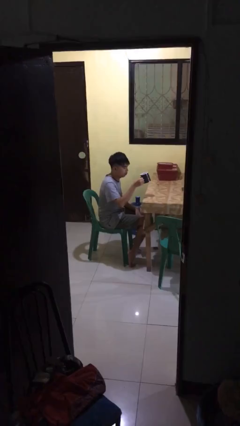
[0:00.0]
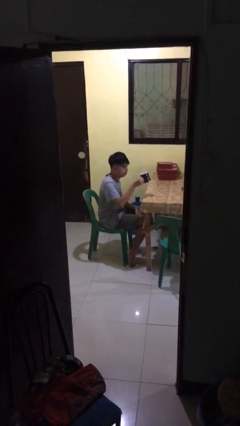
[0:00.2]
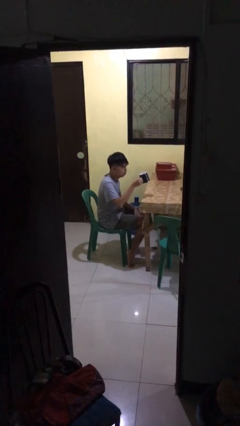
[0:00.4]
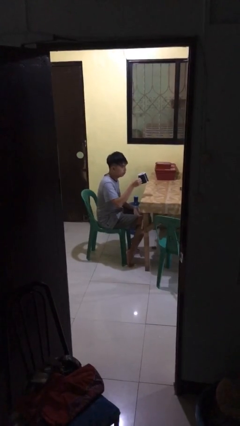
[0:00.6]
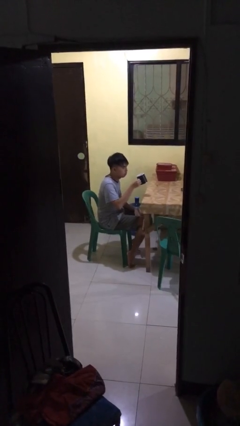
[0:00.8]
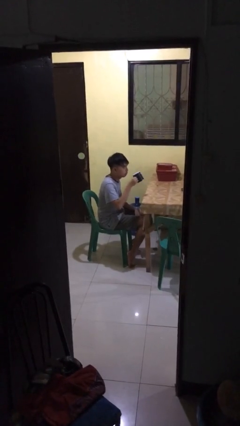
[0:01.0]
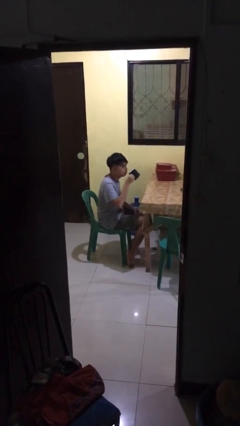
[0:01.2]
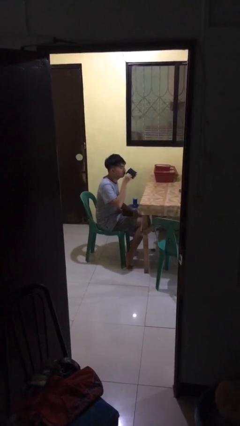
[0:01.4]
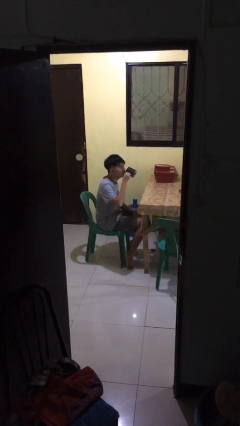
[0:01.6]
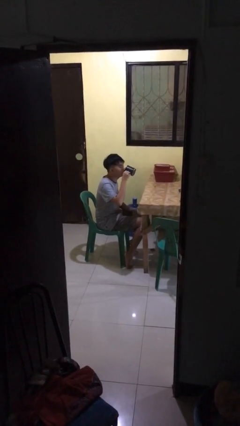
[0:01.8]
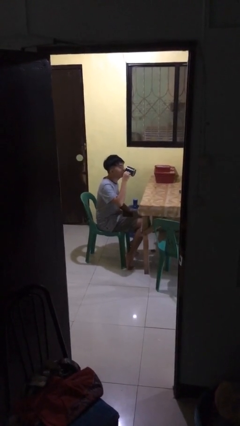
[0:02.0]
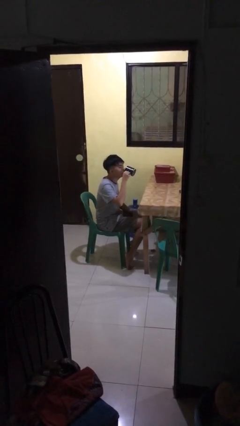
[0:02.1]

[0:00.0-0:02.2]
person drinks from mug

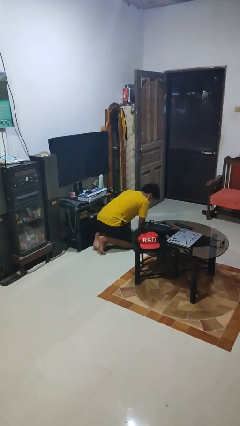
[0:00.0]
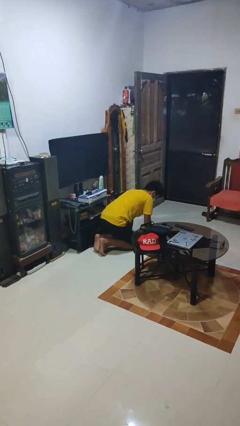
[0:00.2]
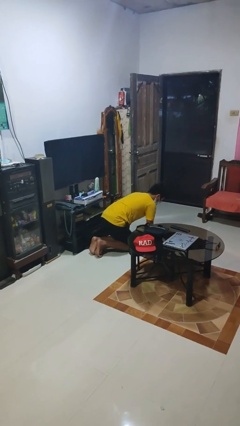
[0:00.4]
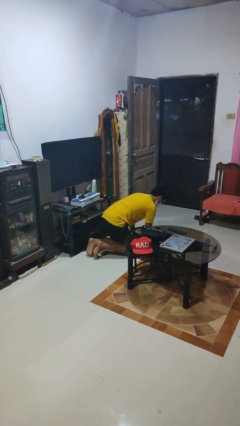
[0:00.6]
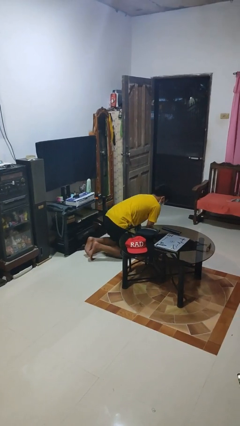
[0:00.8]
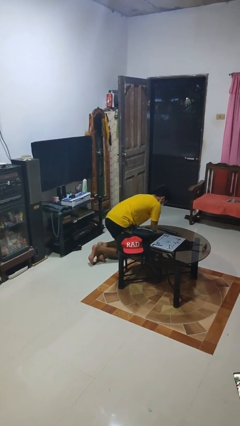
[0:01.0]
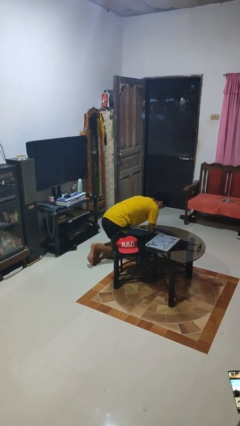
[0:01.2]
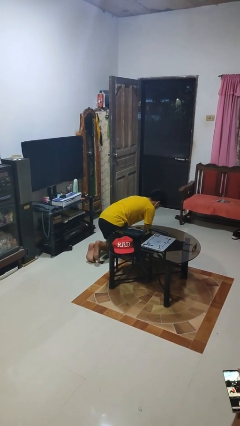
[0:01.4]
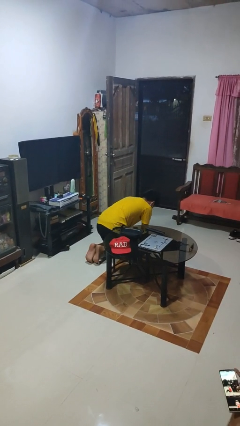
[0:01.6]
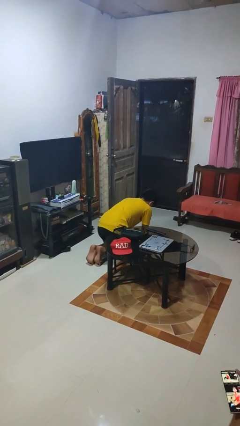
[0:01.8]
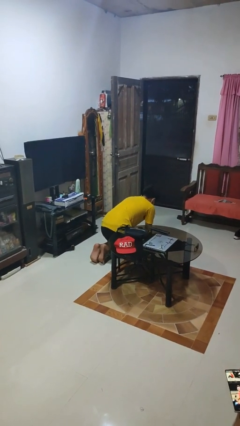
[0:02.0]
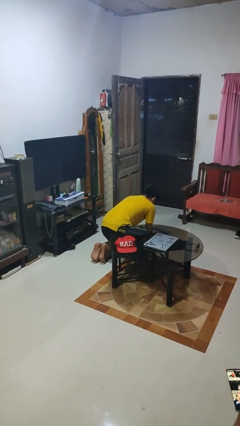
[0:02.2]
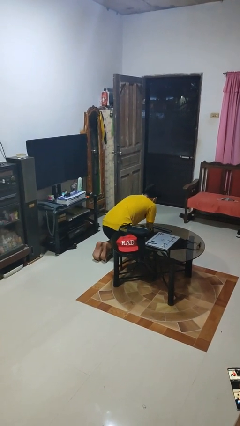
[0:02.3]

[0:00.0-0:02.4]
person crawls

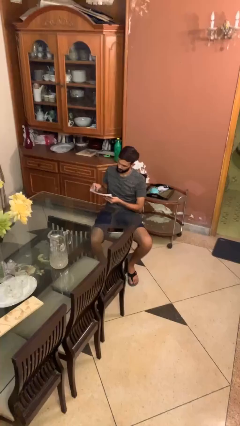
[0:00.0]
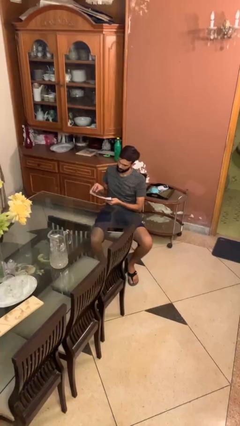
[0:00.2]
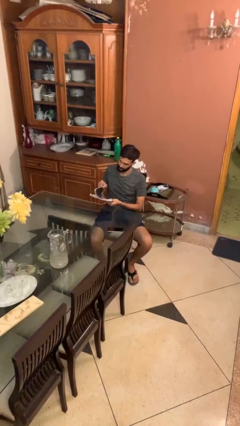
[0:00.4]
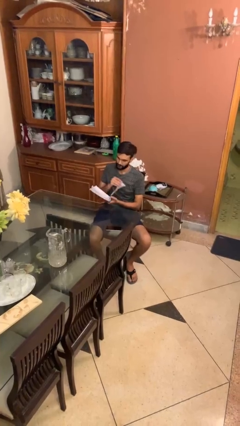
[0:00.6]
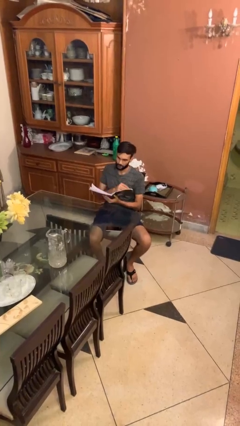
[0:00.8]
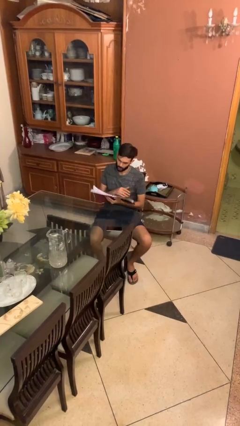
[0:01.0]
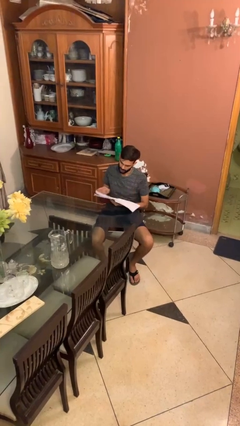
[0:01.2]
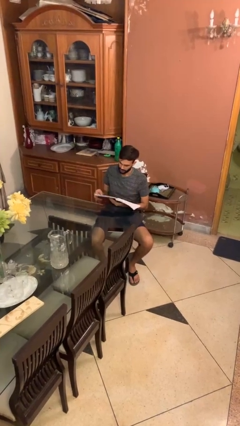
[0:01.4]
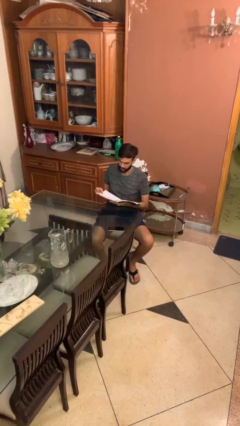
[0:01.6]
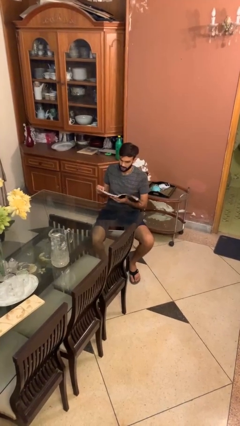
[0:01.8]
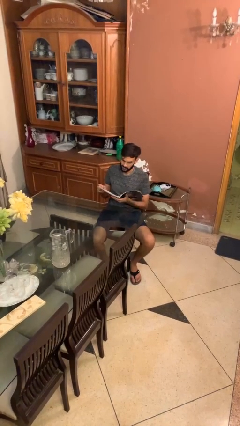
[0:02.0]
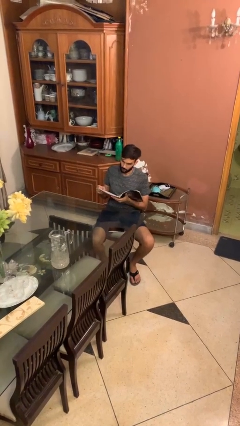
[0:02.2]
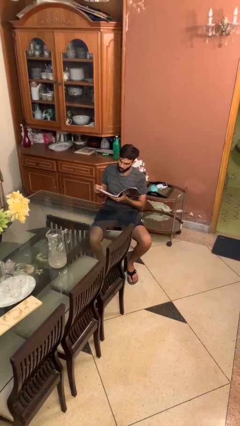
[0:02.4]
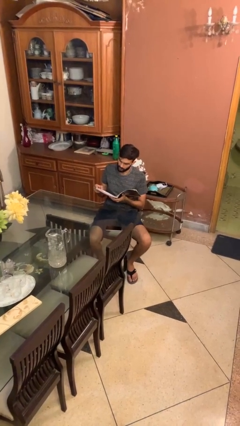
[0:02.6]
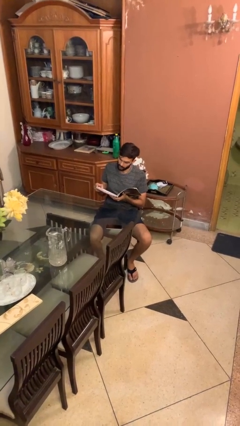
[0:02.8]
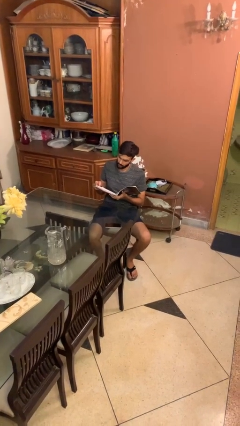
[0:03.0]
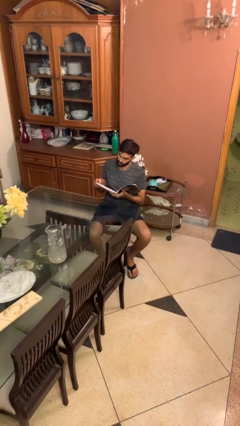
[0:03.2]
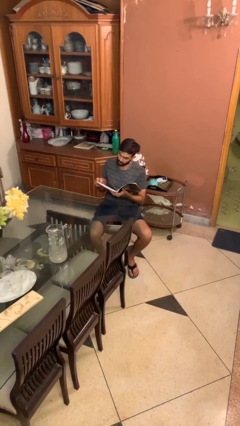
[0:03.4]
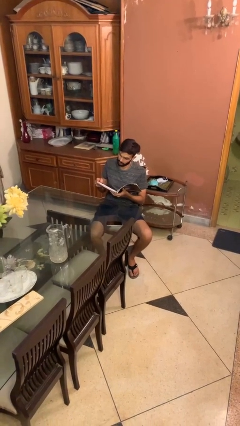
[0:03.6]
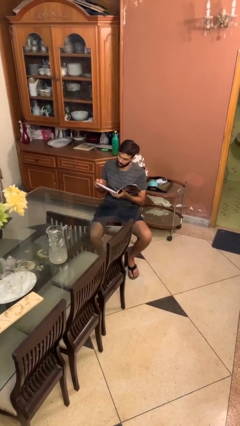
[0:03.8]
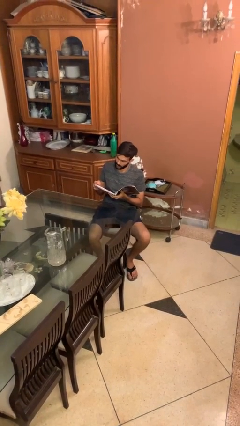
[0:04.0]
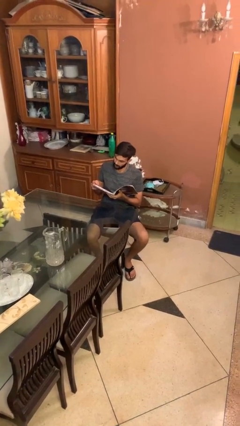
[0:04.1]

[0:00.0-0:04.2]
person reads document

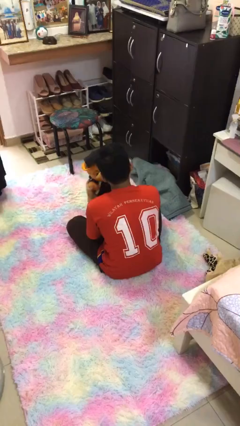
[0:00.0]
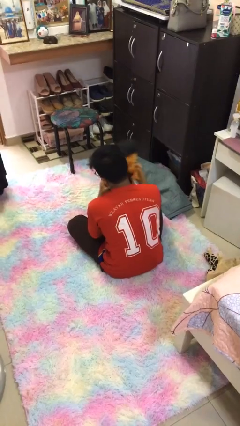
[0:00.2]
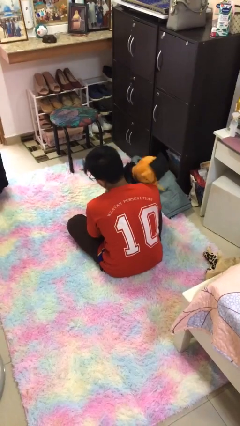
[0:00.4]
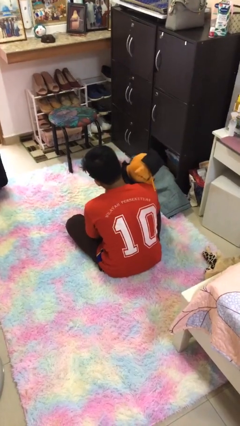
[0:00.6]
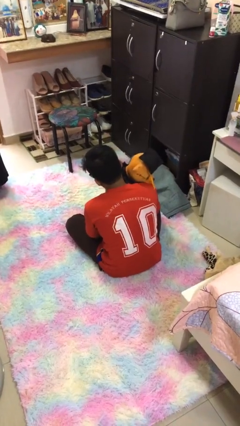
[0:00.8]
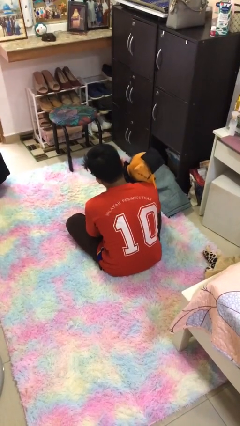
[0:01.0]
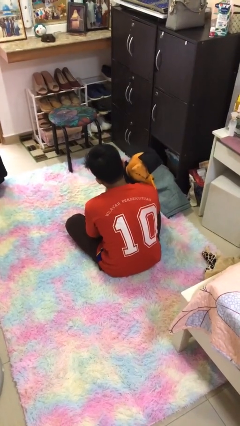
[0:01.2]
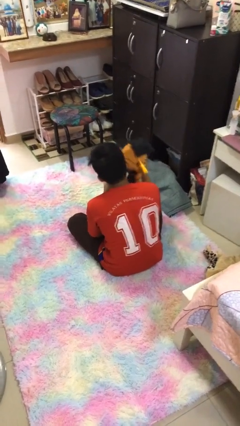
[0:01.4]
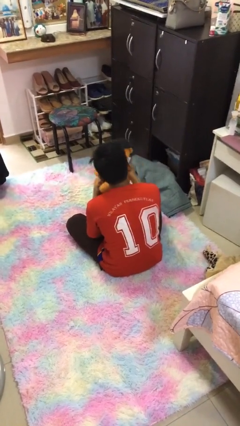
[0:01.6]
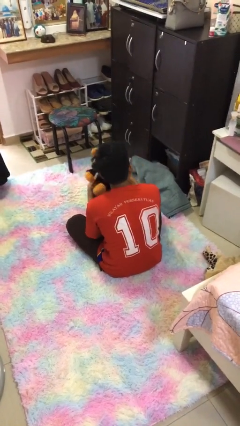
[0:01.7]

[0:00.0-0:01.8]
person hugs stuffed animal

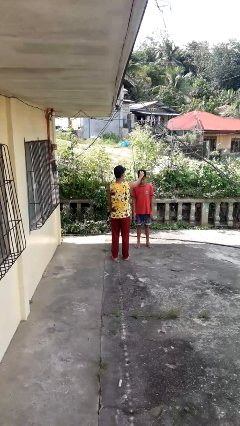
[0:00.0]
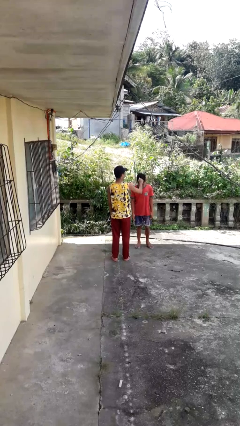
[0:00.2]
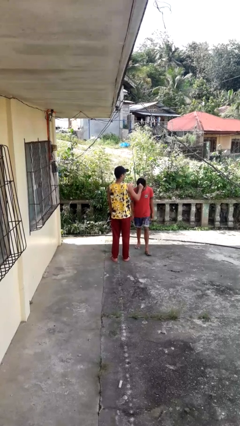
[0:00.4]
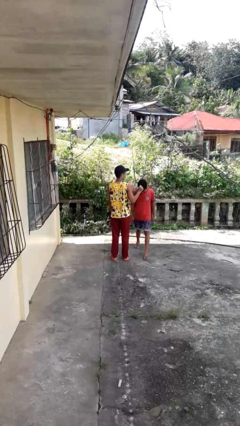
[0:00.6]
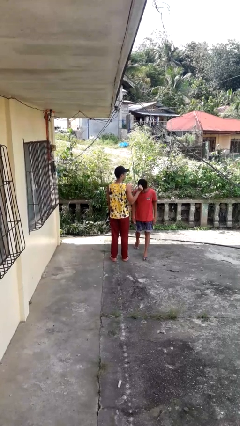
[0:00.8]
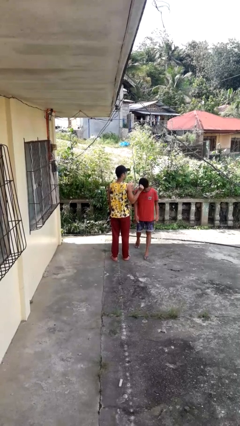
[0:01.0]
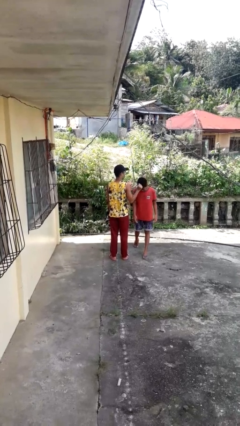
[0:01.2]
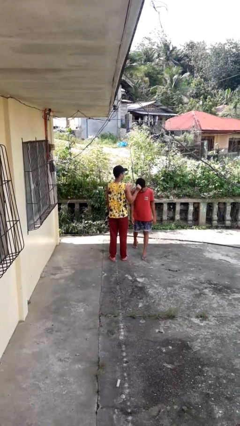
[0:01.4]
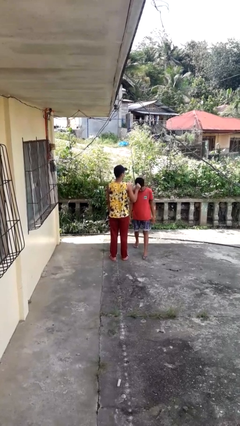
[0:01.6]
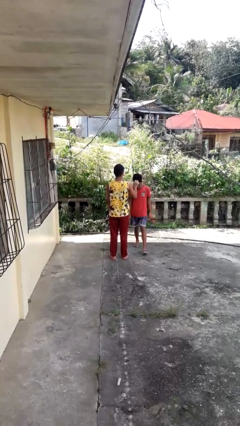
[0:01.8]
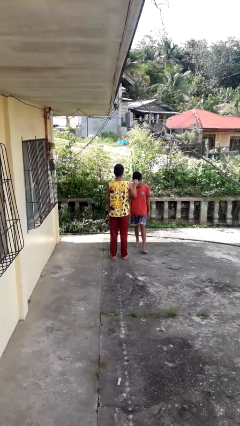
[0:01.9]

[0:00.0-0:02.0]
person grabs person by hair

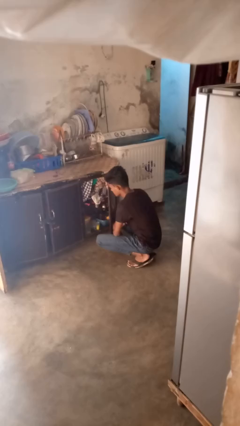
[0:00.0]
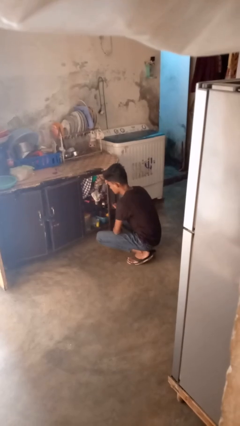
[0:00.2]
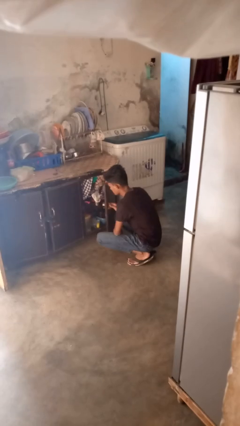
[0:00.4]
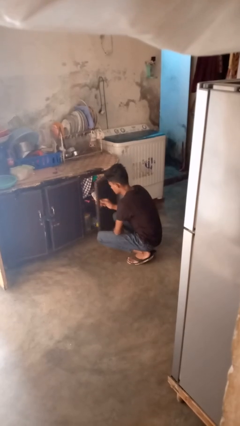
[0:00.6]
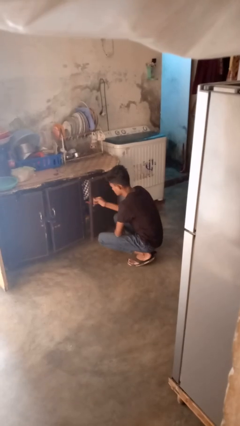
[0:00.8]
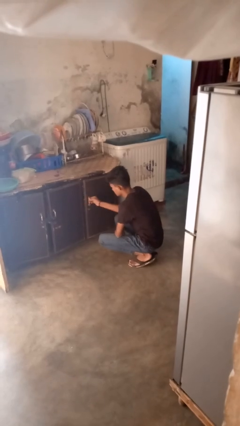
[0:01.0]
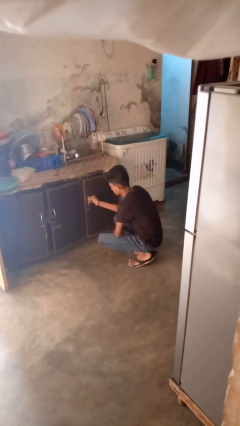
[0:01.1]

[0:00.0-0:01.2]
person closes cabinet

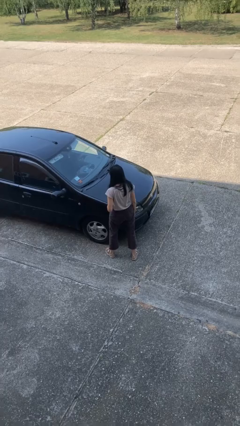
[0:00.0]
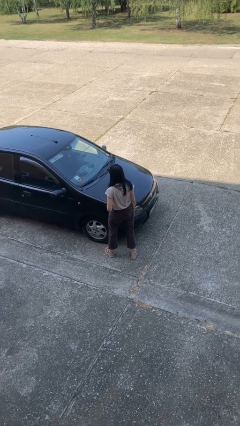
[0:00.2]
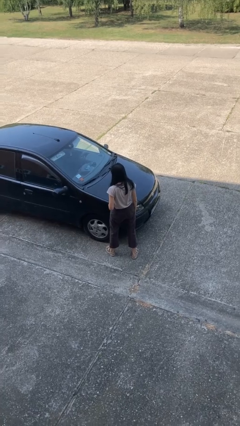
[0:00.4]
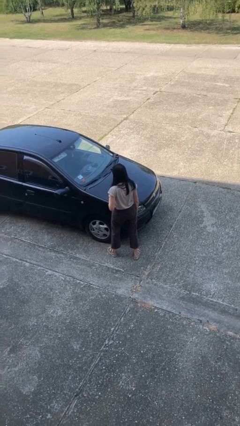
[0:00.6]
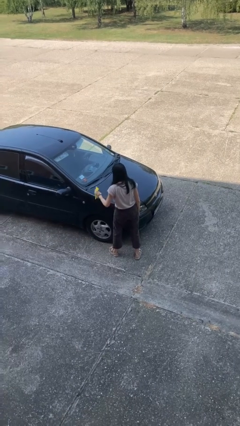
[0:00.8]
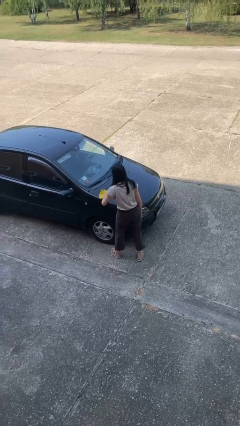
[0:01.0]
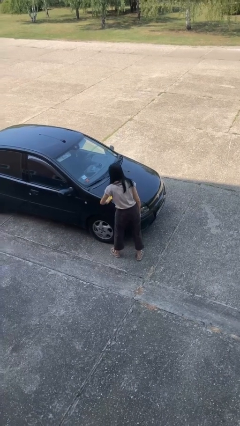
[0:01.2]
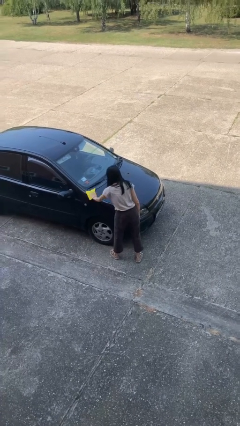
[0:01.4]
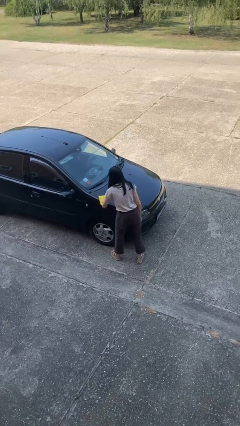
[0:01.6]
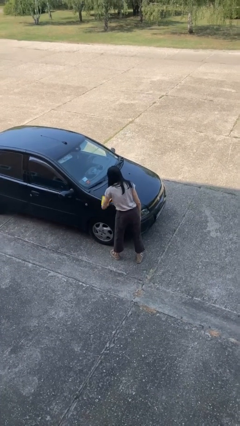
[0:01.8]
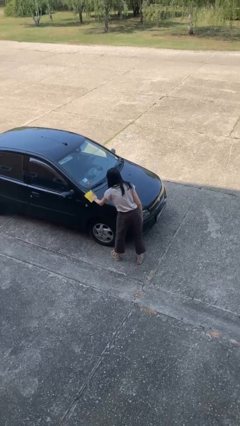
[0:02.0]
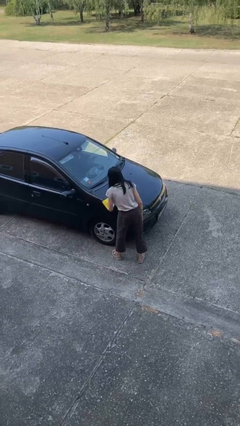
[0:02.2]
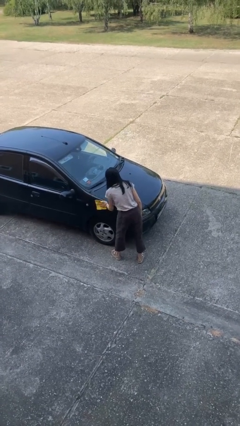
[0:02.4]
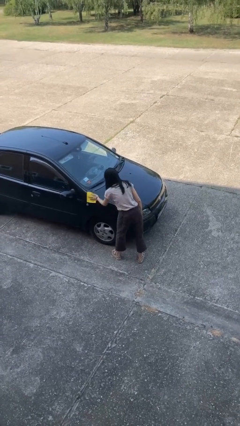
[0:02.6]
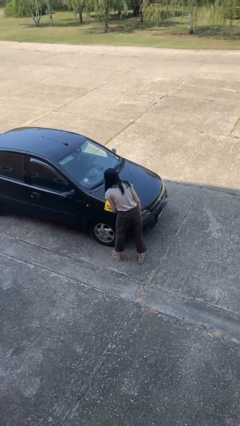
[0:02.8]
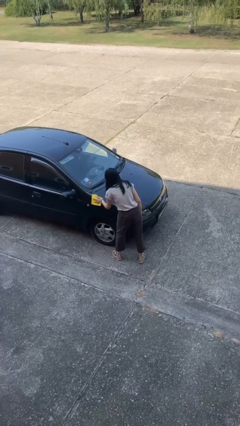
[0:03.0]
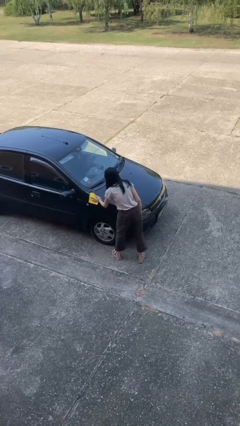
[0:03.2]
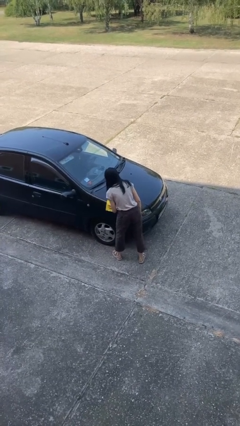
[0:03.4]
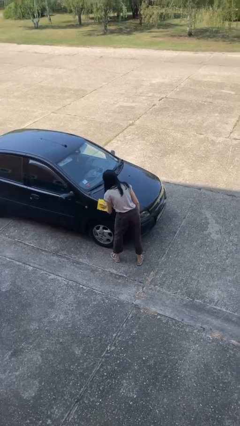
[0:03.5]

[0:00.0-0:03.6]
person polishes car with rag
